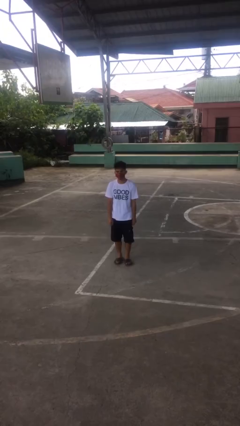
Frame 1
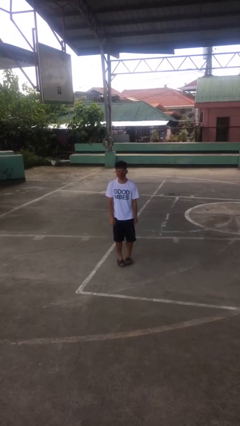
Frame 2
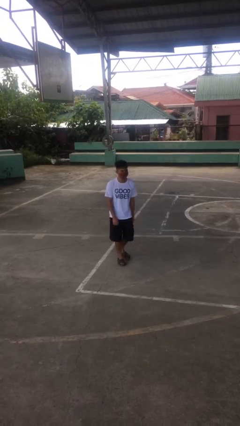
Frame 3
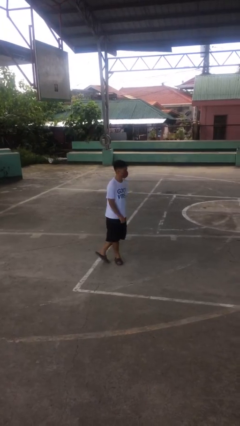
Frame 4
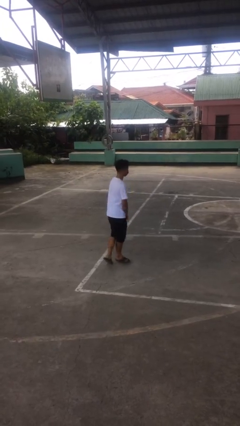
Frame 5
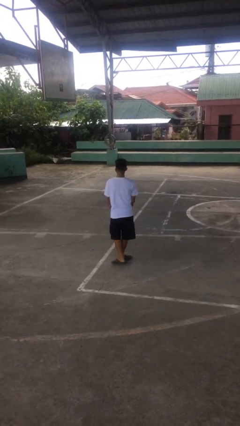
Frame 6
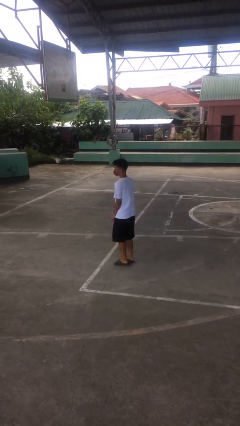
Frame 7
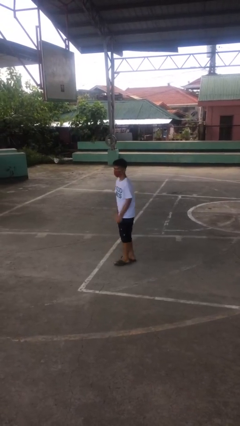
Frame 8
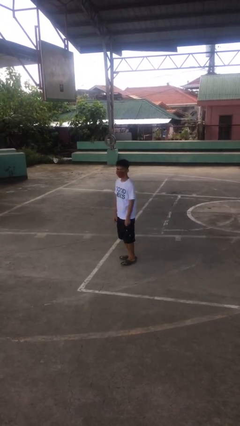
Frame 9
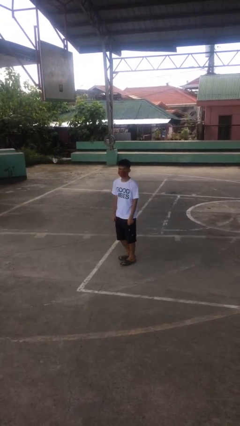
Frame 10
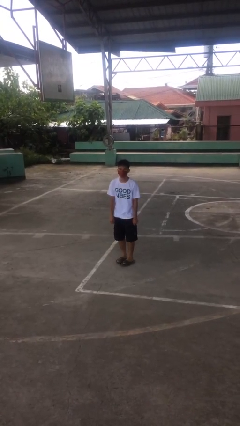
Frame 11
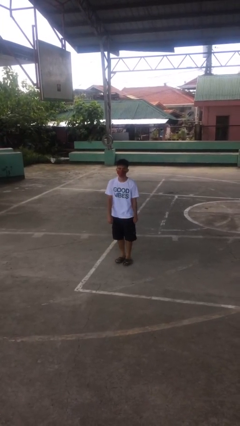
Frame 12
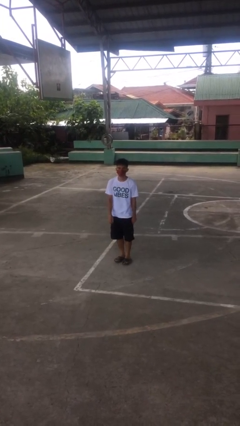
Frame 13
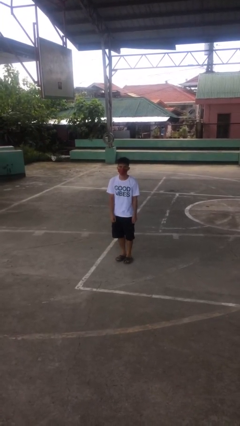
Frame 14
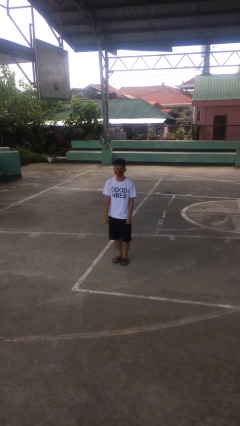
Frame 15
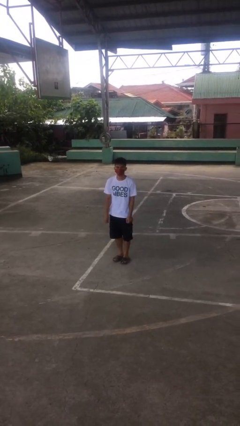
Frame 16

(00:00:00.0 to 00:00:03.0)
person twirls

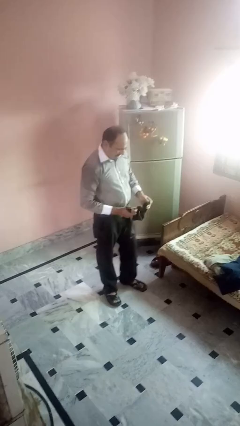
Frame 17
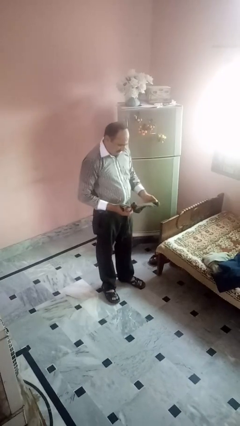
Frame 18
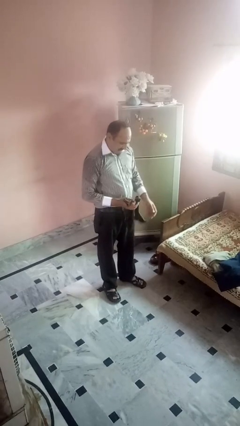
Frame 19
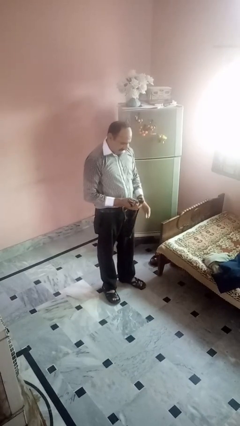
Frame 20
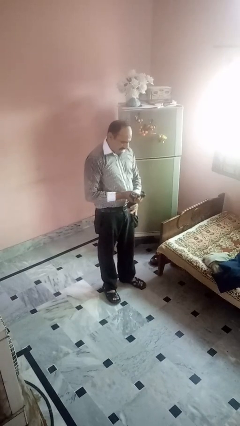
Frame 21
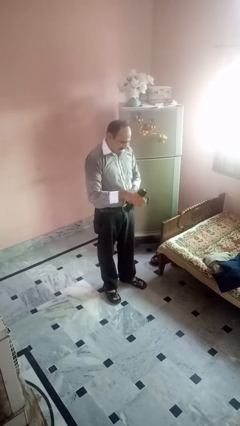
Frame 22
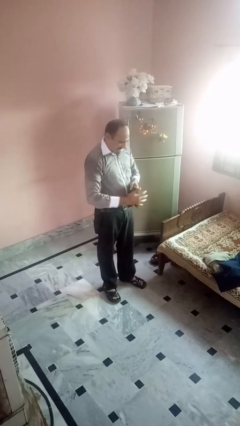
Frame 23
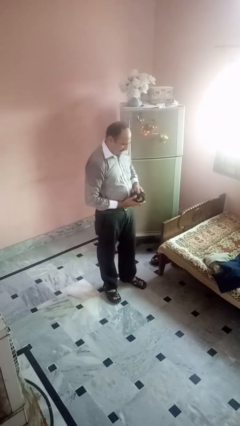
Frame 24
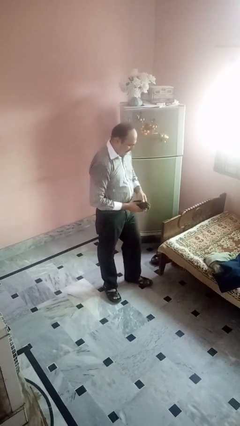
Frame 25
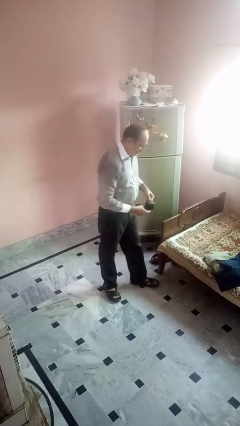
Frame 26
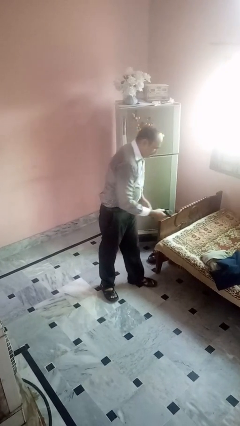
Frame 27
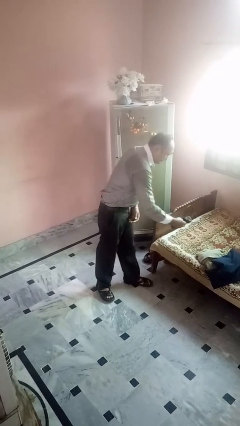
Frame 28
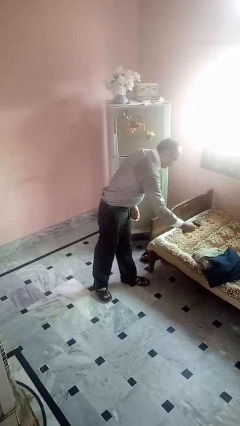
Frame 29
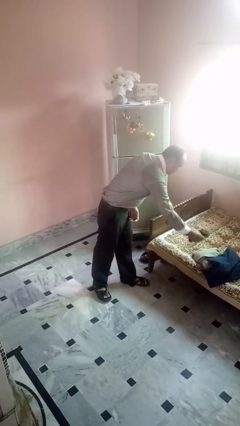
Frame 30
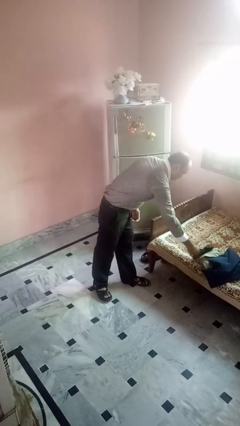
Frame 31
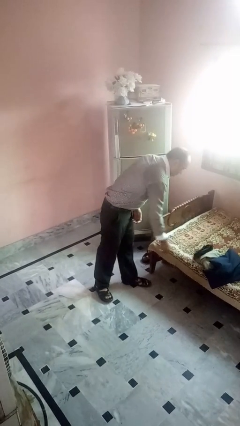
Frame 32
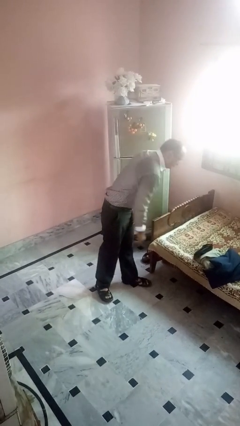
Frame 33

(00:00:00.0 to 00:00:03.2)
person folds socks

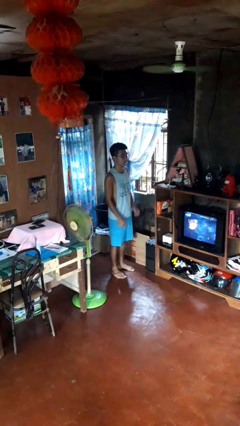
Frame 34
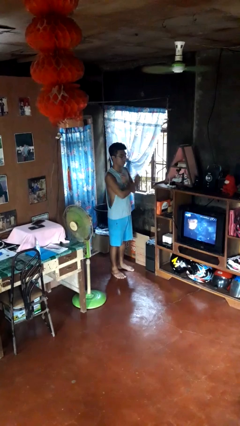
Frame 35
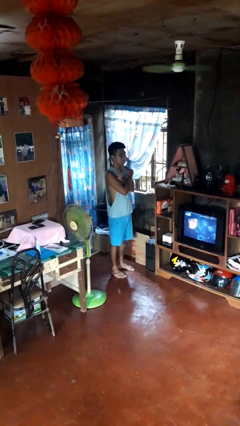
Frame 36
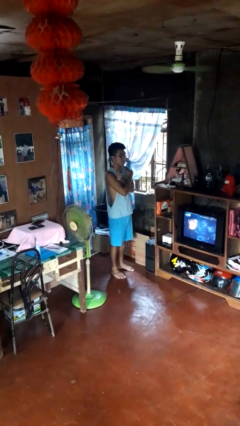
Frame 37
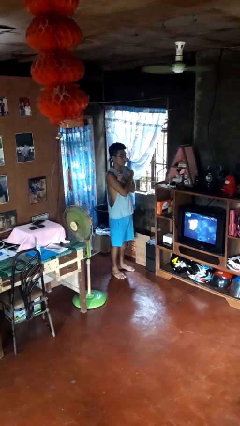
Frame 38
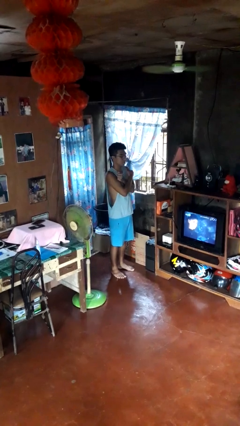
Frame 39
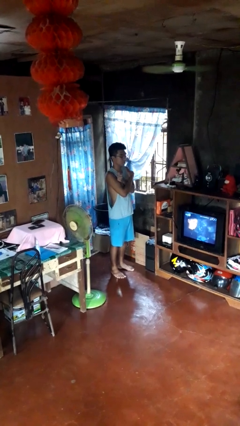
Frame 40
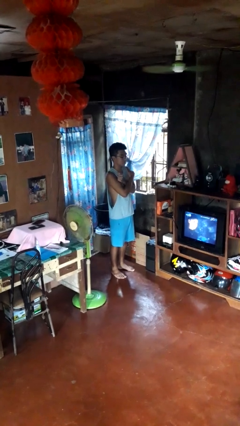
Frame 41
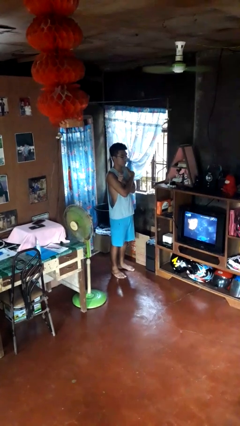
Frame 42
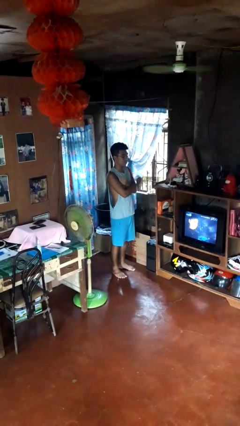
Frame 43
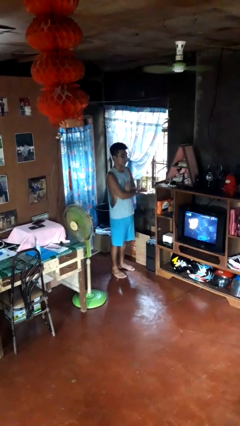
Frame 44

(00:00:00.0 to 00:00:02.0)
person gestures arms x

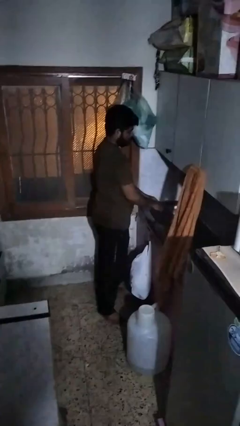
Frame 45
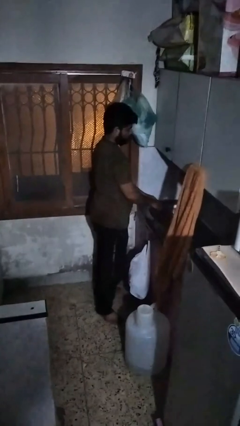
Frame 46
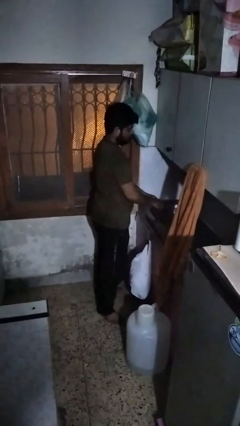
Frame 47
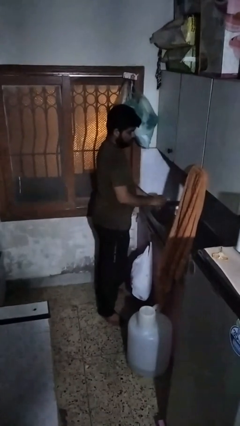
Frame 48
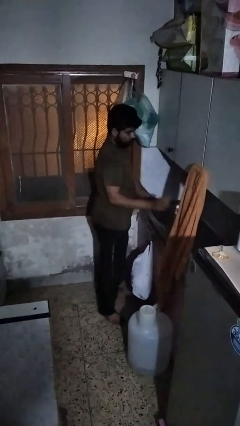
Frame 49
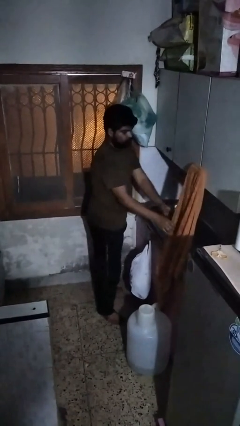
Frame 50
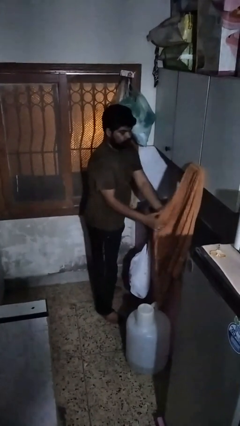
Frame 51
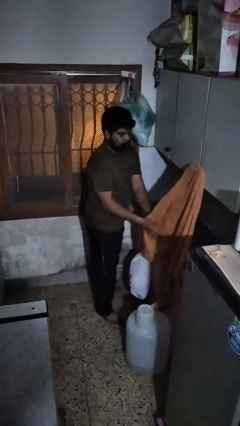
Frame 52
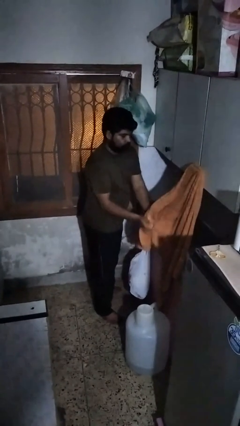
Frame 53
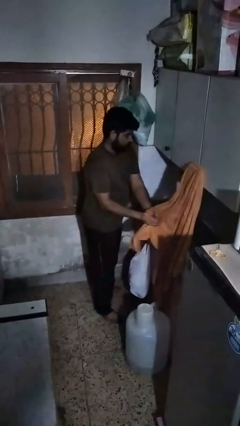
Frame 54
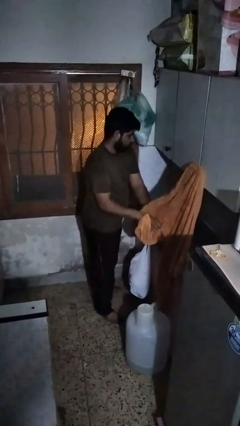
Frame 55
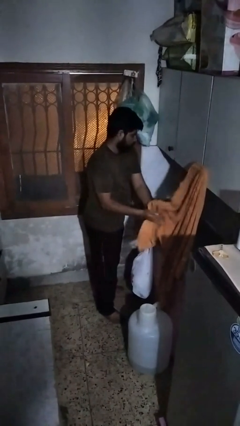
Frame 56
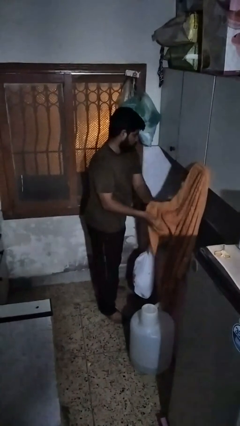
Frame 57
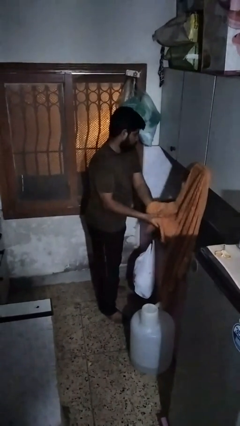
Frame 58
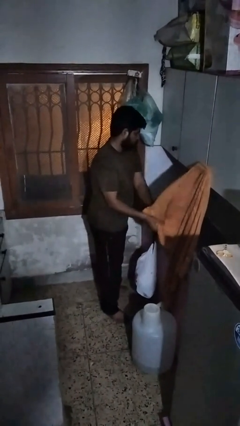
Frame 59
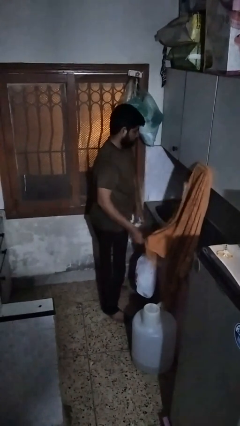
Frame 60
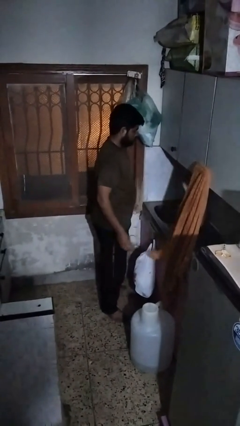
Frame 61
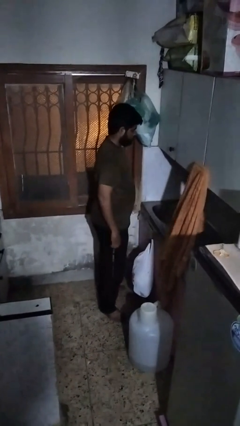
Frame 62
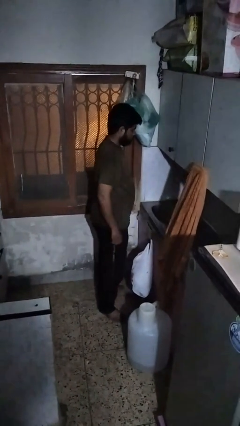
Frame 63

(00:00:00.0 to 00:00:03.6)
person dries hands with towel

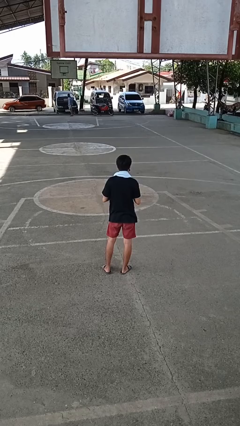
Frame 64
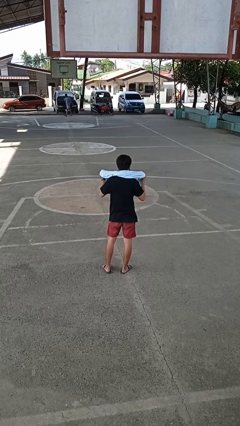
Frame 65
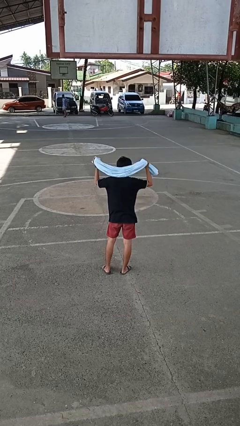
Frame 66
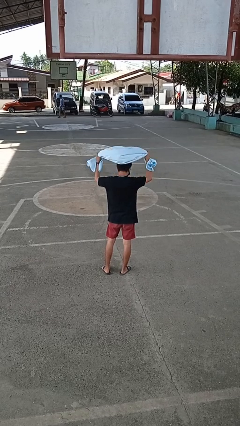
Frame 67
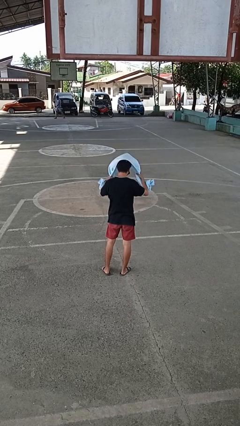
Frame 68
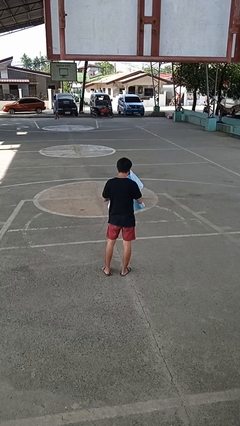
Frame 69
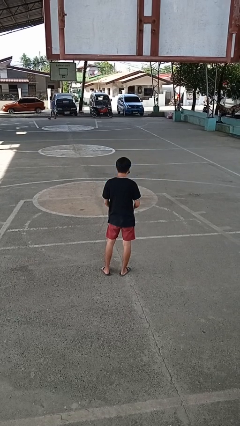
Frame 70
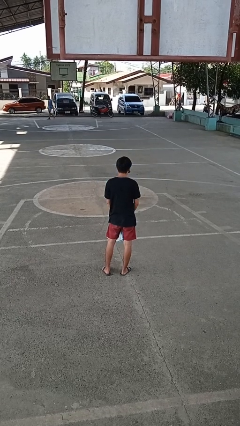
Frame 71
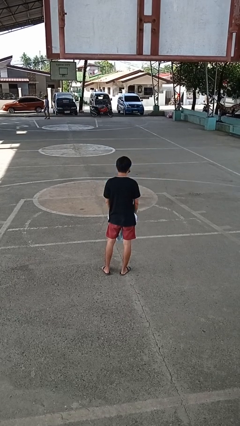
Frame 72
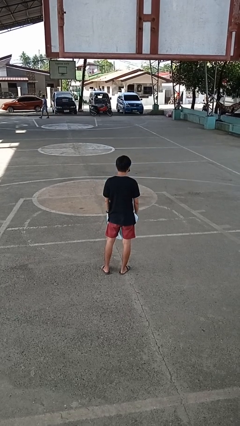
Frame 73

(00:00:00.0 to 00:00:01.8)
person takes off scarf

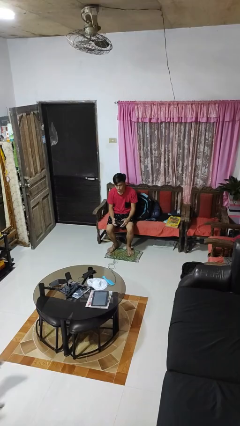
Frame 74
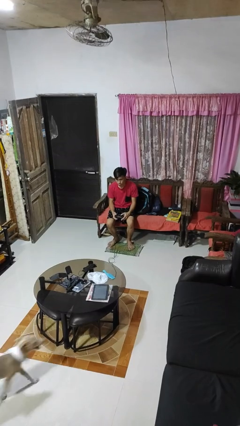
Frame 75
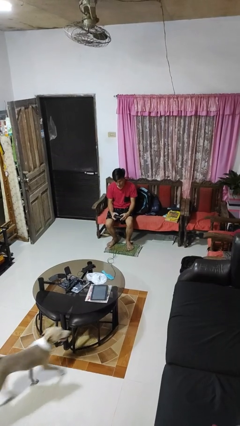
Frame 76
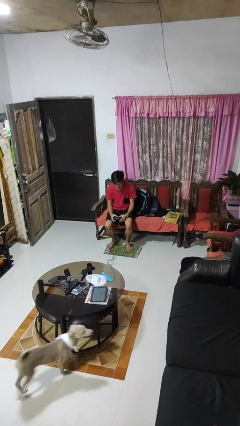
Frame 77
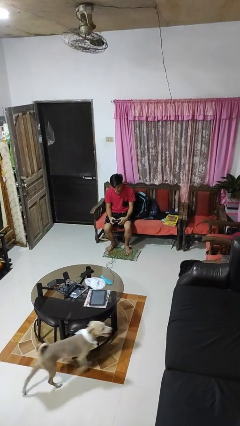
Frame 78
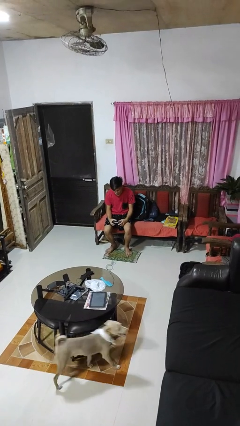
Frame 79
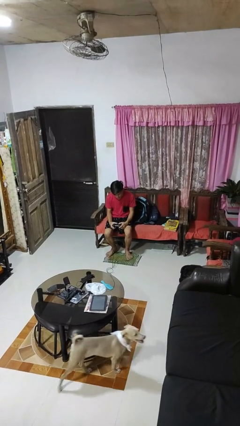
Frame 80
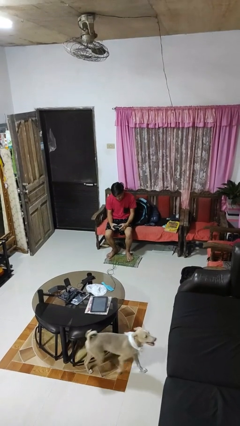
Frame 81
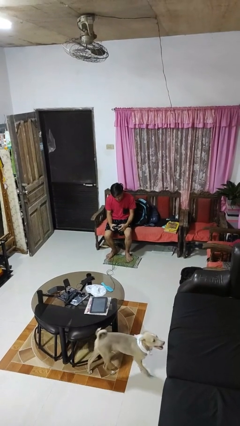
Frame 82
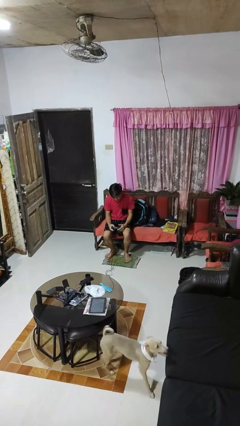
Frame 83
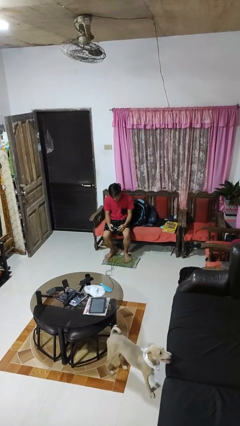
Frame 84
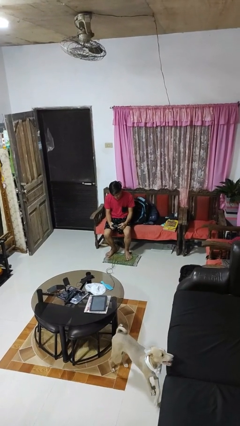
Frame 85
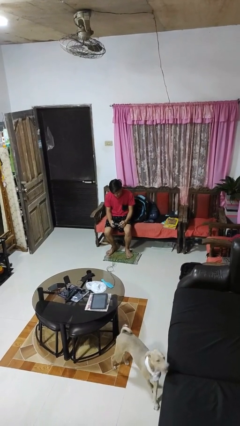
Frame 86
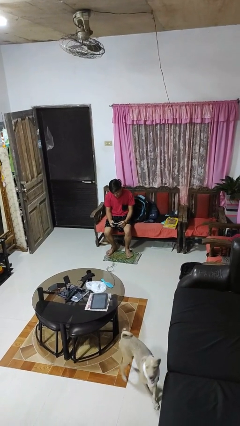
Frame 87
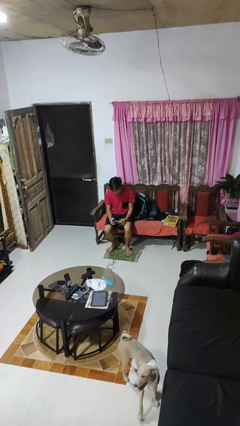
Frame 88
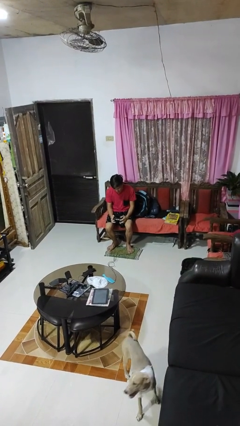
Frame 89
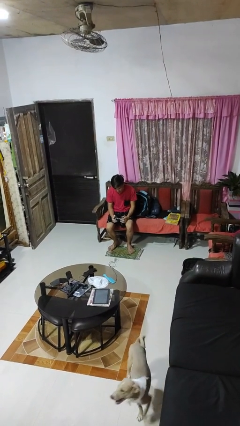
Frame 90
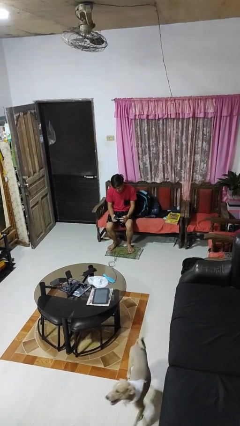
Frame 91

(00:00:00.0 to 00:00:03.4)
person interacts with handheld game

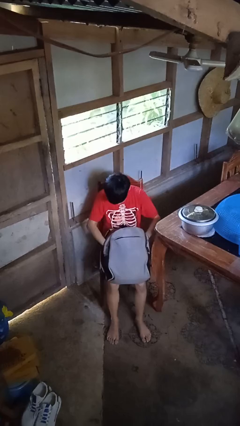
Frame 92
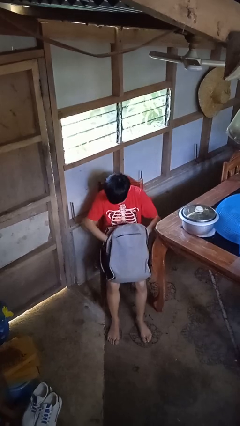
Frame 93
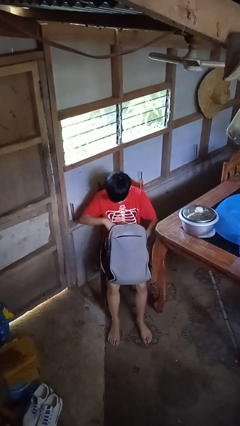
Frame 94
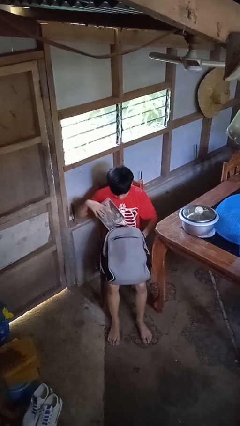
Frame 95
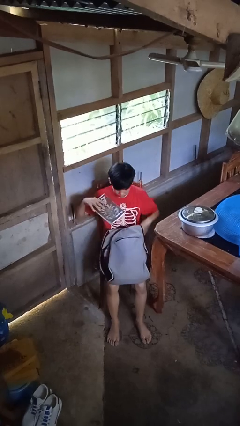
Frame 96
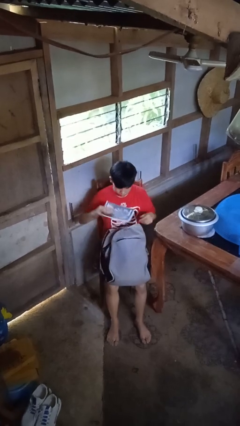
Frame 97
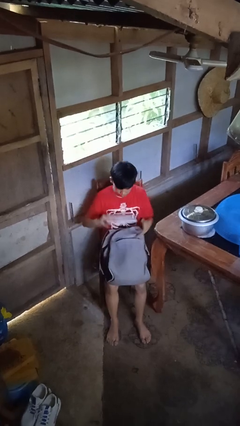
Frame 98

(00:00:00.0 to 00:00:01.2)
person takes object from backpack
